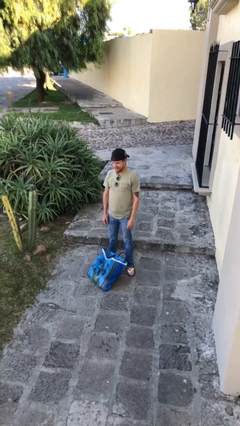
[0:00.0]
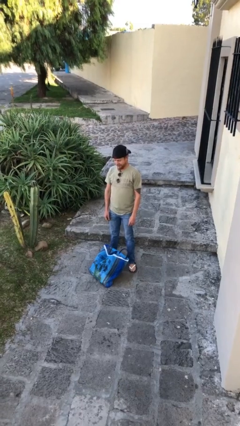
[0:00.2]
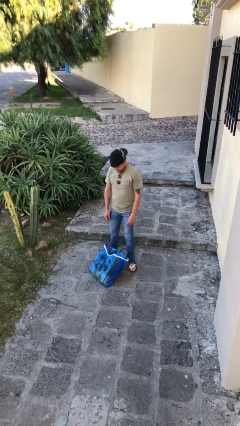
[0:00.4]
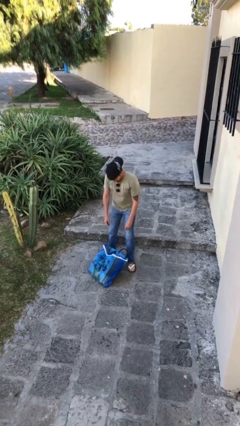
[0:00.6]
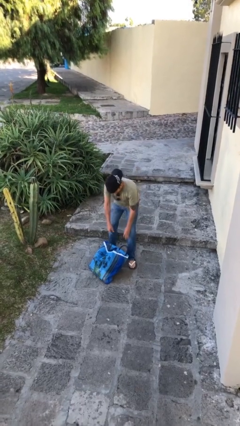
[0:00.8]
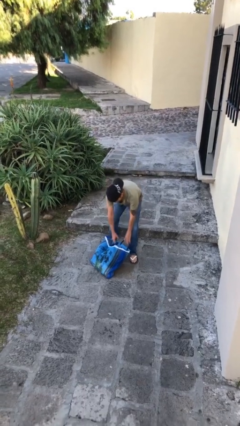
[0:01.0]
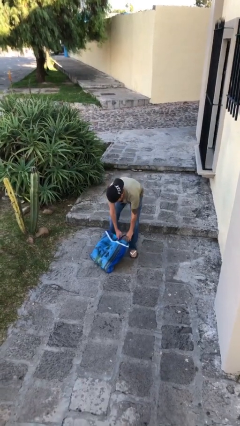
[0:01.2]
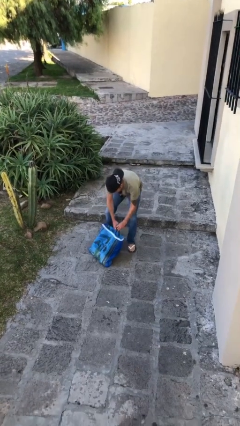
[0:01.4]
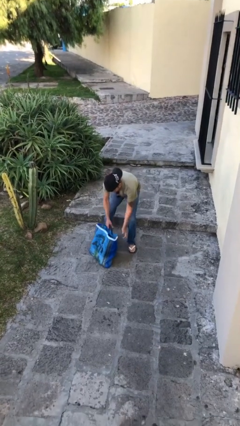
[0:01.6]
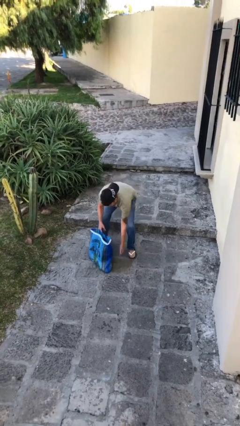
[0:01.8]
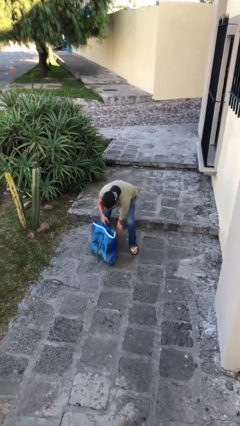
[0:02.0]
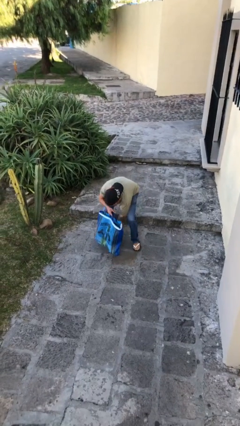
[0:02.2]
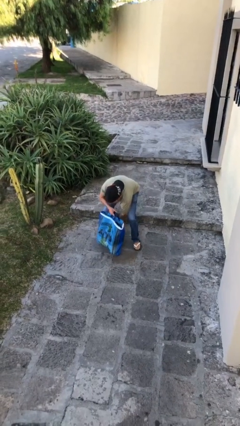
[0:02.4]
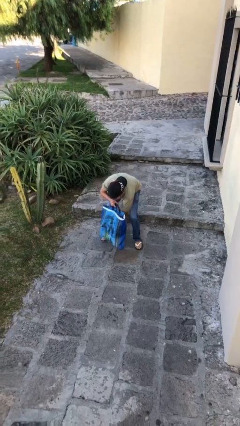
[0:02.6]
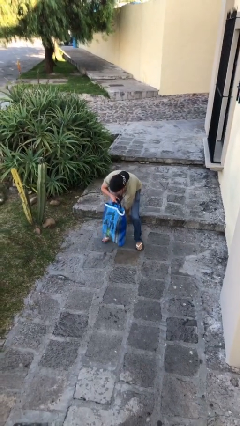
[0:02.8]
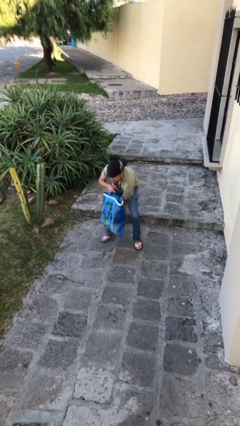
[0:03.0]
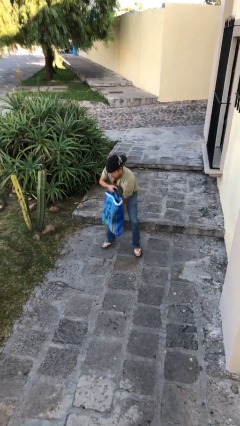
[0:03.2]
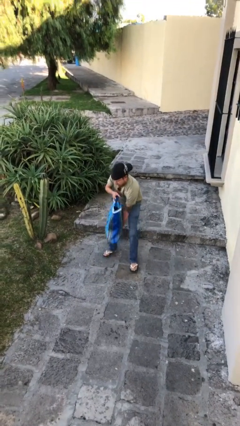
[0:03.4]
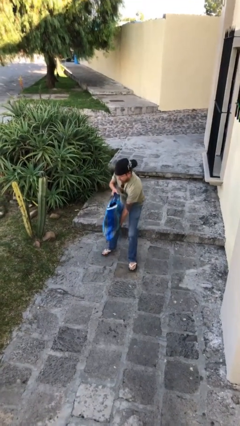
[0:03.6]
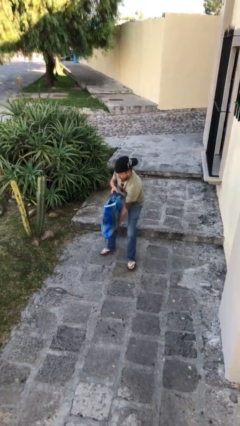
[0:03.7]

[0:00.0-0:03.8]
person picks up object from floor

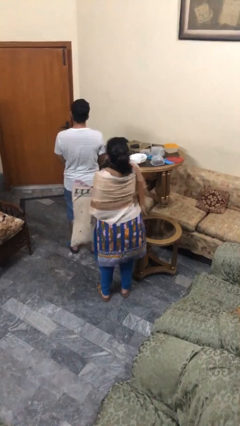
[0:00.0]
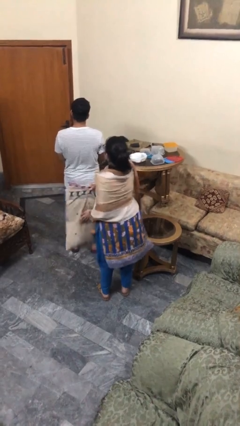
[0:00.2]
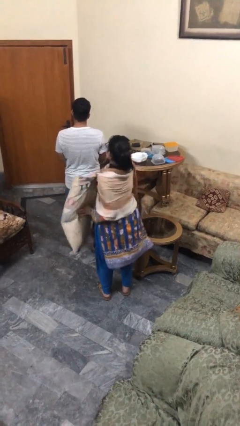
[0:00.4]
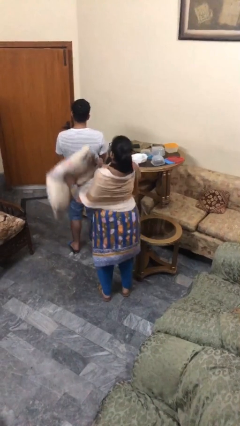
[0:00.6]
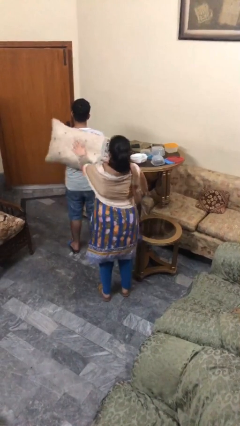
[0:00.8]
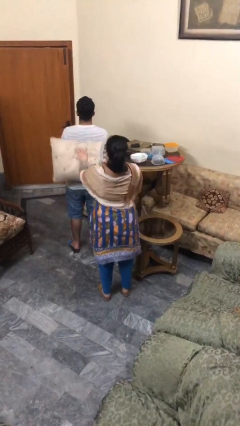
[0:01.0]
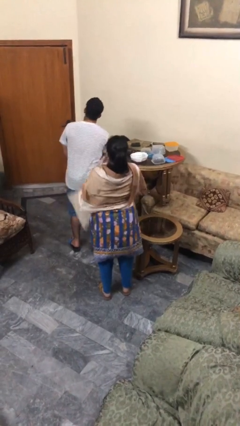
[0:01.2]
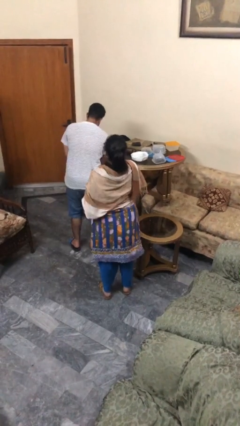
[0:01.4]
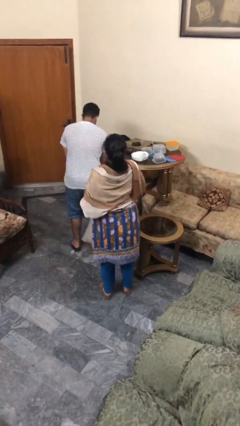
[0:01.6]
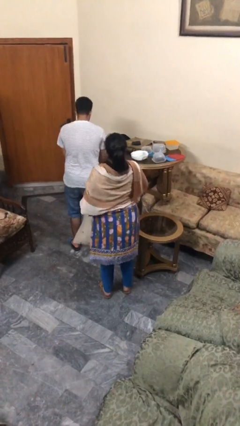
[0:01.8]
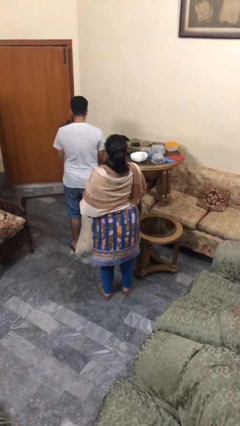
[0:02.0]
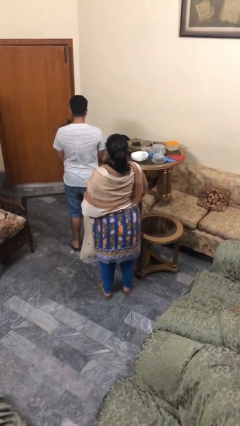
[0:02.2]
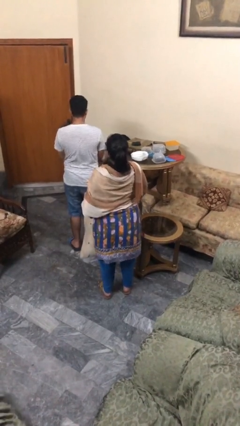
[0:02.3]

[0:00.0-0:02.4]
person hits person with pillow

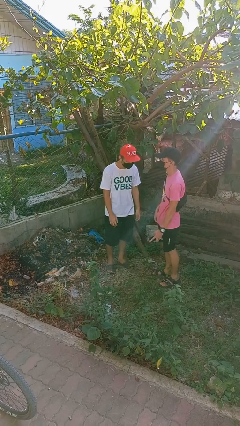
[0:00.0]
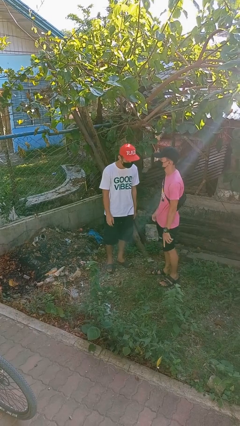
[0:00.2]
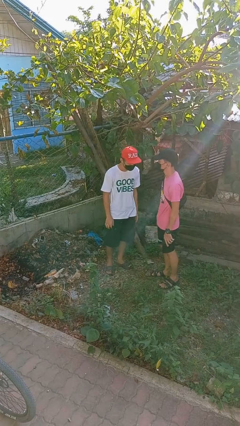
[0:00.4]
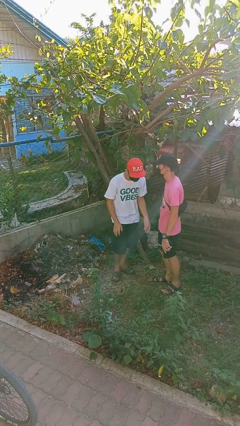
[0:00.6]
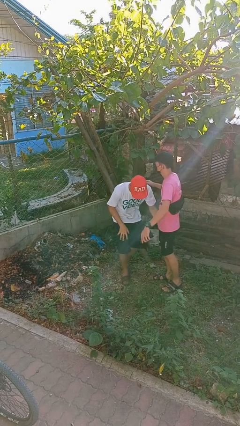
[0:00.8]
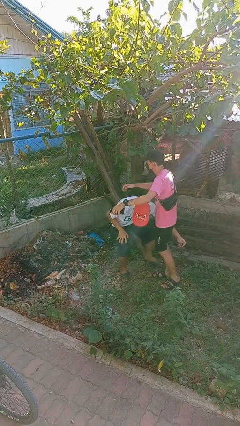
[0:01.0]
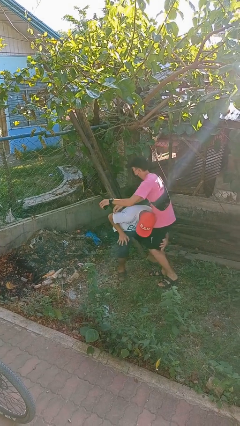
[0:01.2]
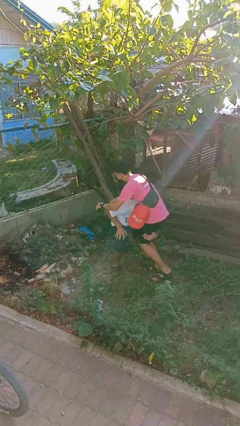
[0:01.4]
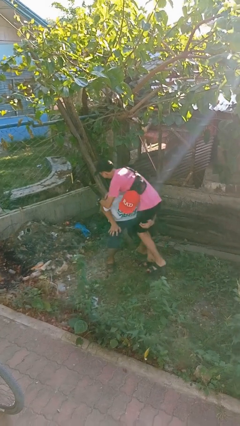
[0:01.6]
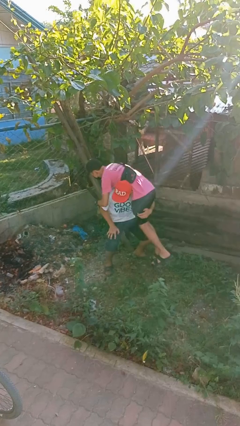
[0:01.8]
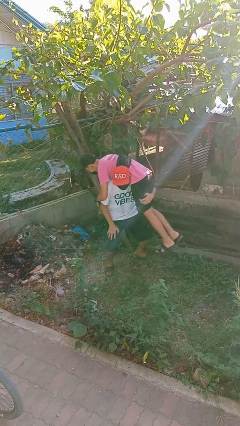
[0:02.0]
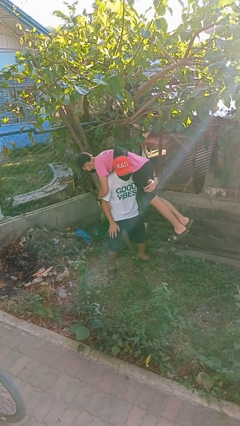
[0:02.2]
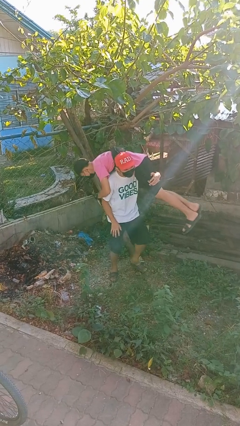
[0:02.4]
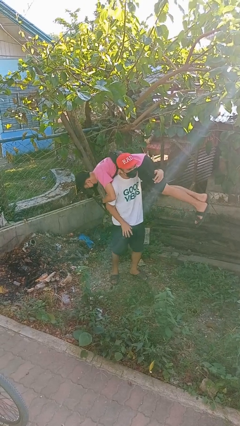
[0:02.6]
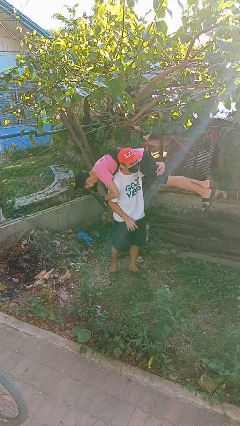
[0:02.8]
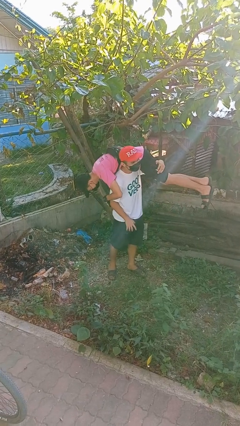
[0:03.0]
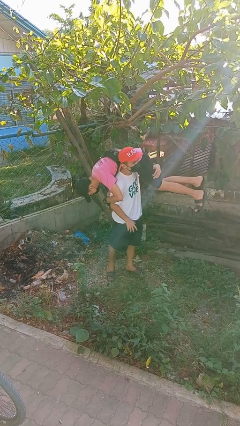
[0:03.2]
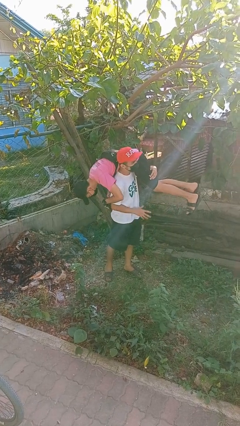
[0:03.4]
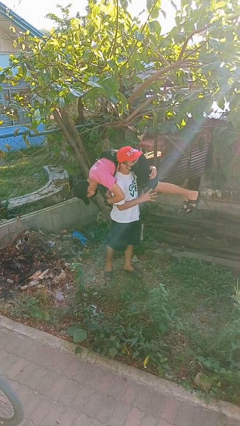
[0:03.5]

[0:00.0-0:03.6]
person carries person over shoulder

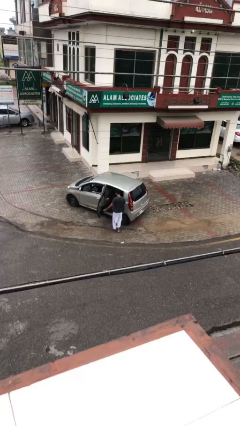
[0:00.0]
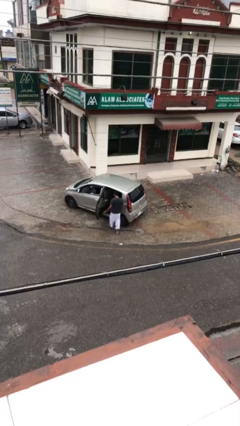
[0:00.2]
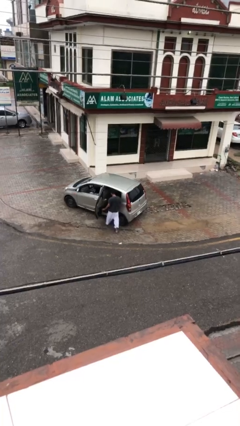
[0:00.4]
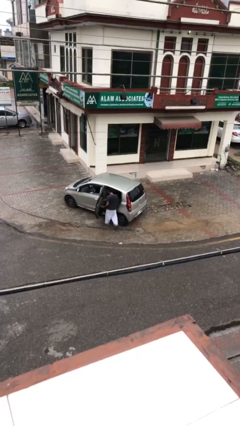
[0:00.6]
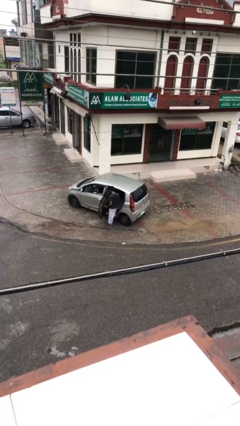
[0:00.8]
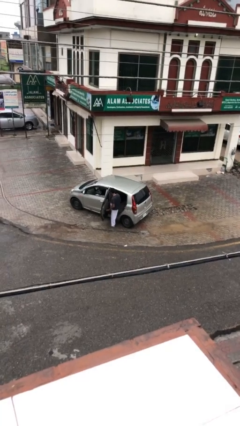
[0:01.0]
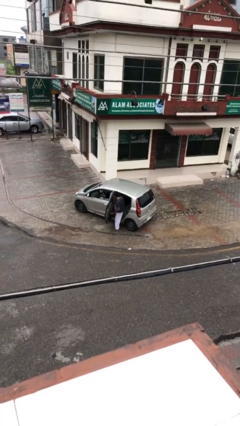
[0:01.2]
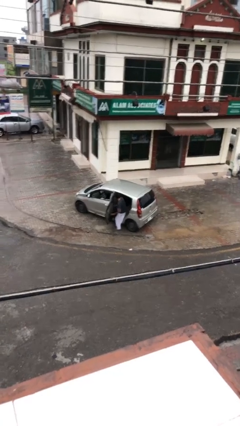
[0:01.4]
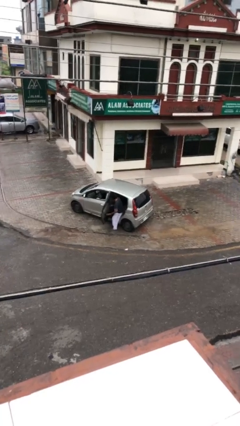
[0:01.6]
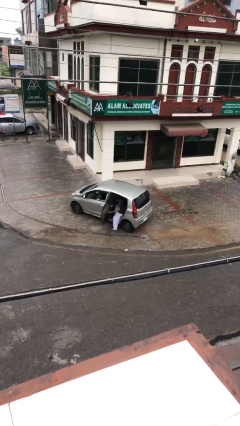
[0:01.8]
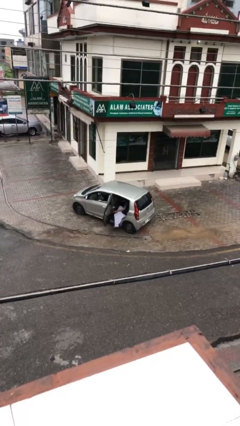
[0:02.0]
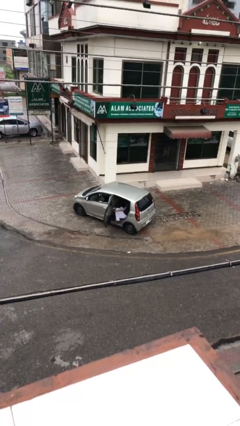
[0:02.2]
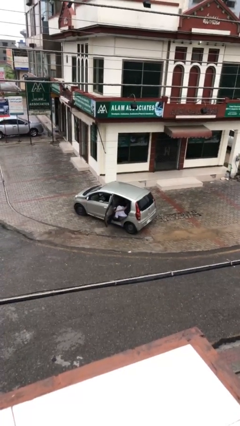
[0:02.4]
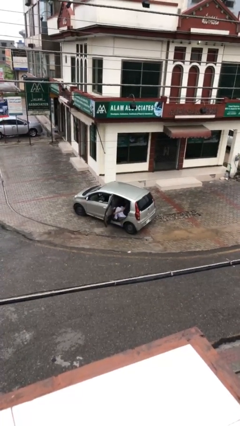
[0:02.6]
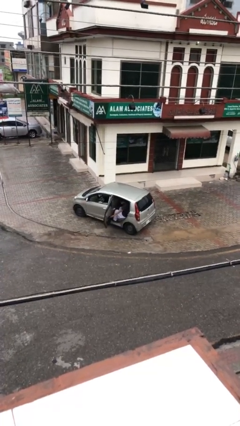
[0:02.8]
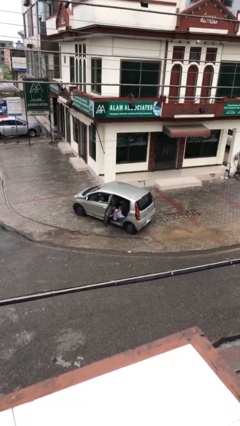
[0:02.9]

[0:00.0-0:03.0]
person enters car

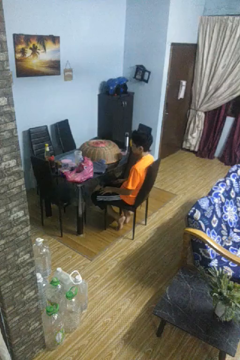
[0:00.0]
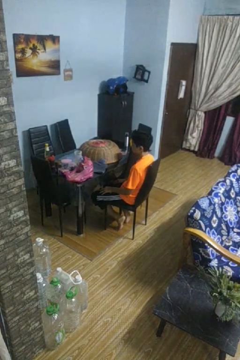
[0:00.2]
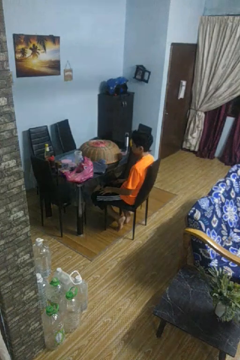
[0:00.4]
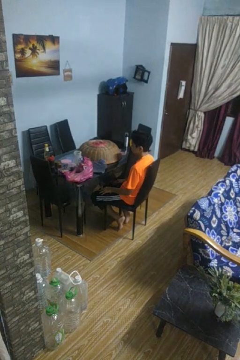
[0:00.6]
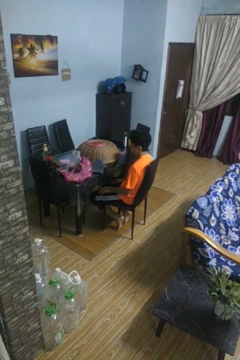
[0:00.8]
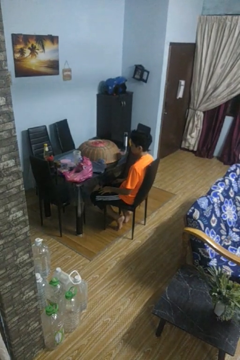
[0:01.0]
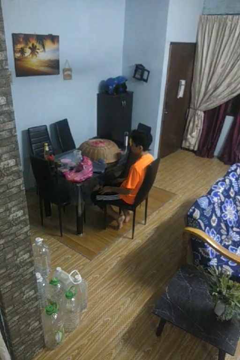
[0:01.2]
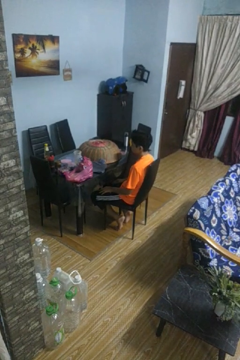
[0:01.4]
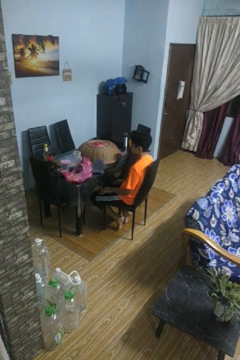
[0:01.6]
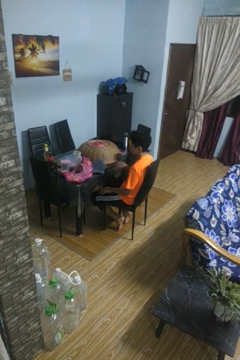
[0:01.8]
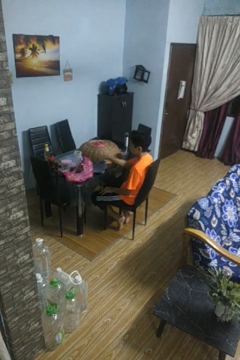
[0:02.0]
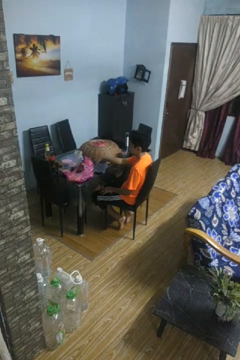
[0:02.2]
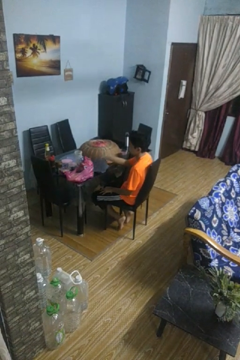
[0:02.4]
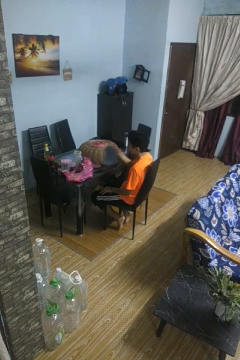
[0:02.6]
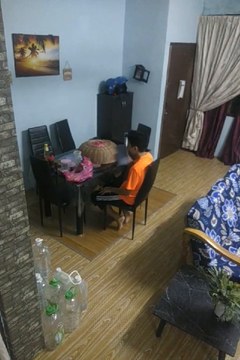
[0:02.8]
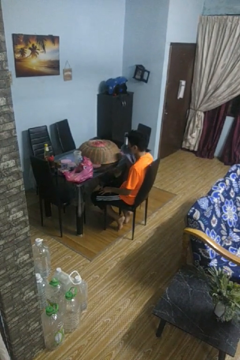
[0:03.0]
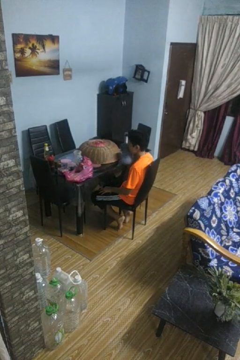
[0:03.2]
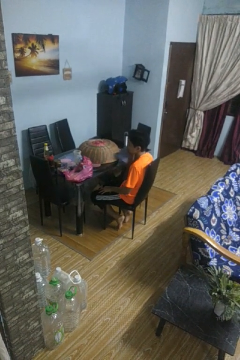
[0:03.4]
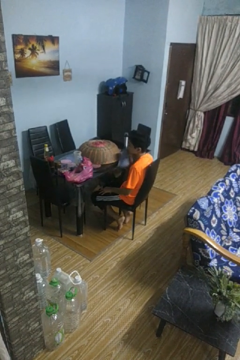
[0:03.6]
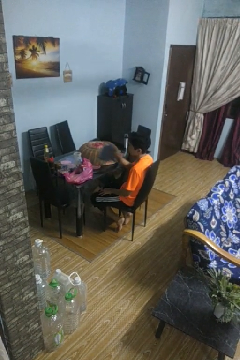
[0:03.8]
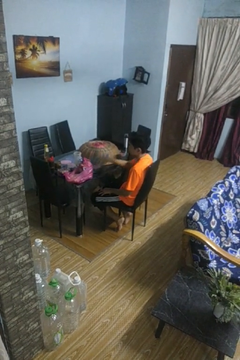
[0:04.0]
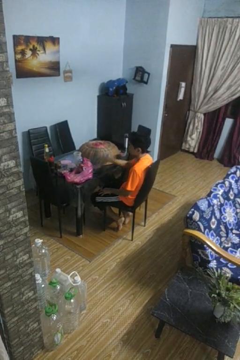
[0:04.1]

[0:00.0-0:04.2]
person wipes mouth with napkin

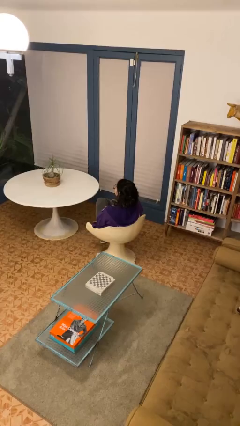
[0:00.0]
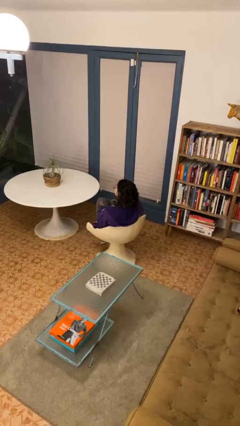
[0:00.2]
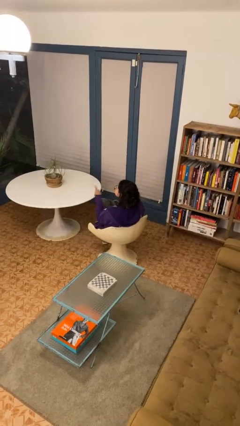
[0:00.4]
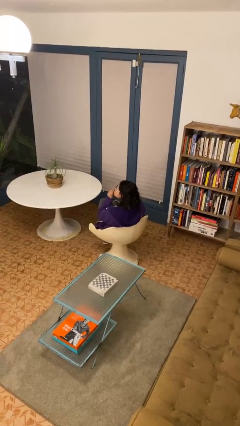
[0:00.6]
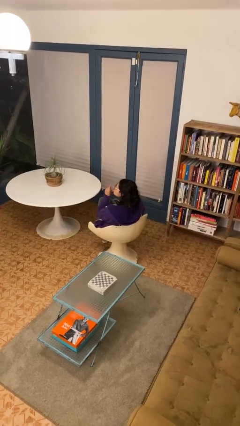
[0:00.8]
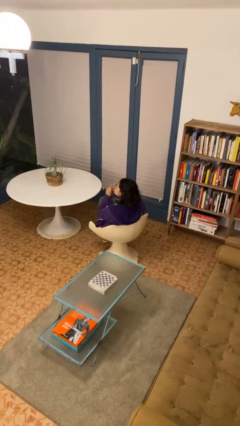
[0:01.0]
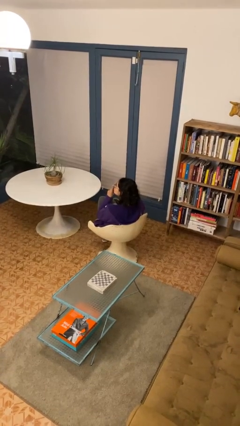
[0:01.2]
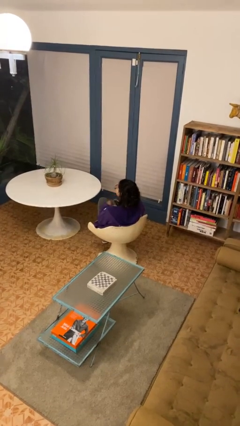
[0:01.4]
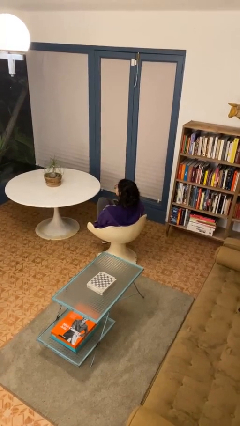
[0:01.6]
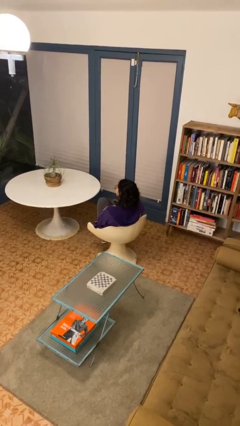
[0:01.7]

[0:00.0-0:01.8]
person gestures be quiet
